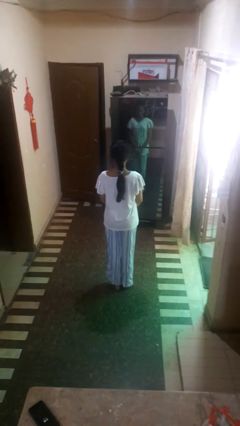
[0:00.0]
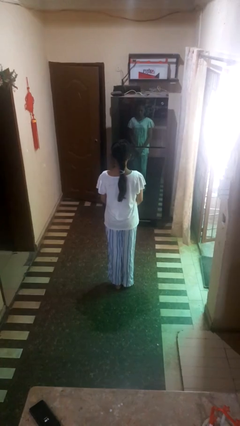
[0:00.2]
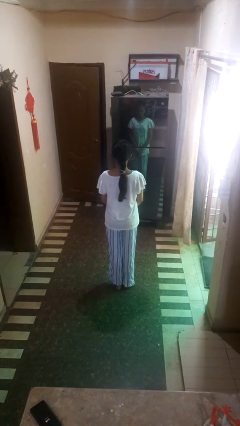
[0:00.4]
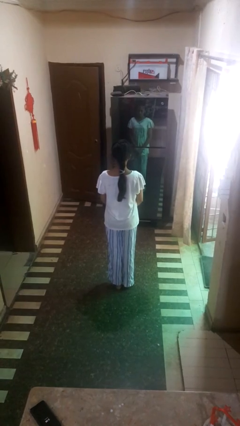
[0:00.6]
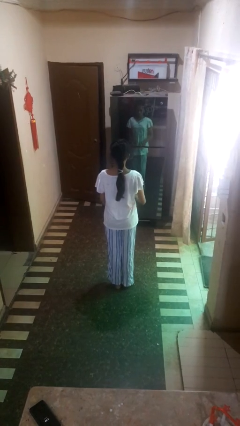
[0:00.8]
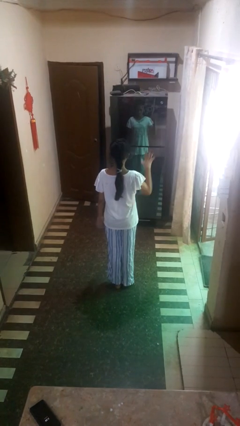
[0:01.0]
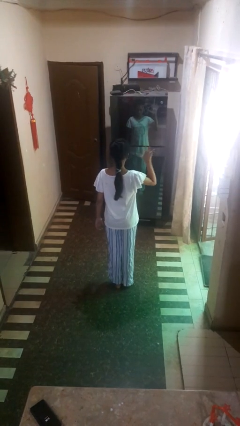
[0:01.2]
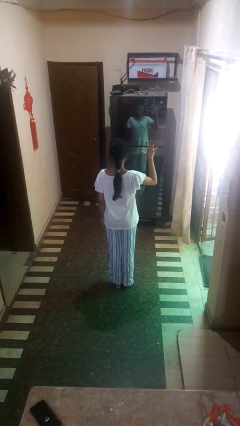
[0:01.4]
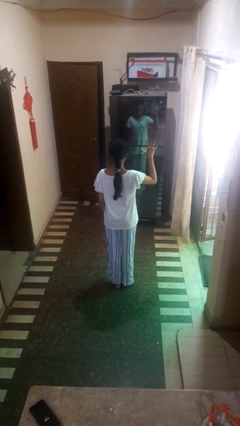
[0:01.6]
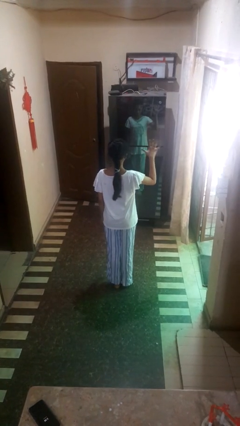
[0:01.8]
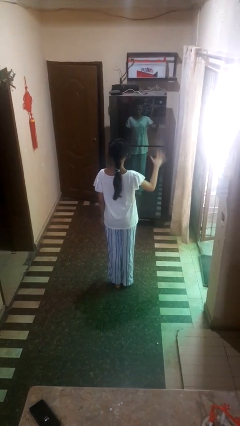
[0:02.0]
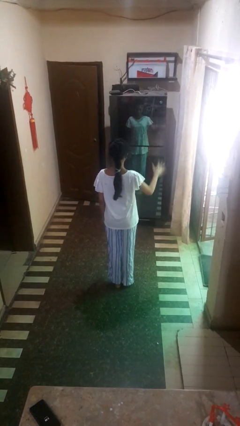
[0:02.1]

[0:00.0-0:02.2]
person gestures number five

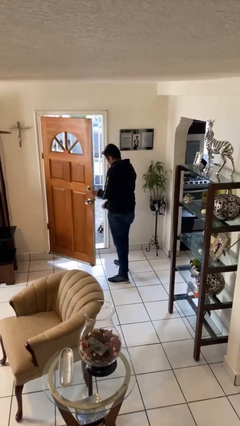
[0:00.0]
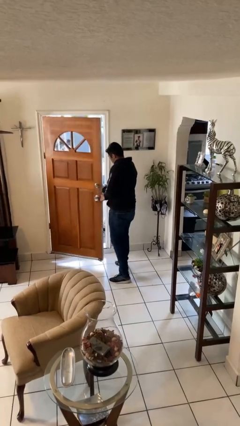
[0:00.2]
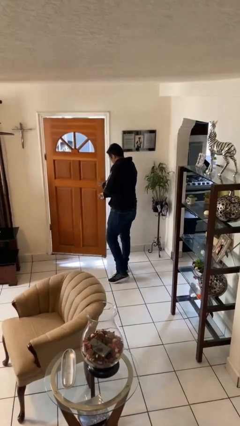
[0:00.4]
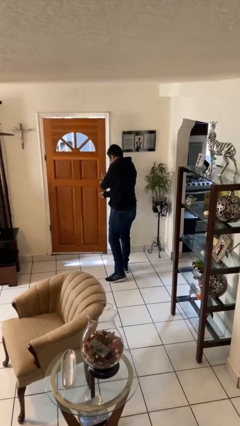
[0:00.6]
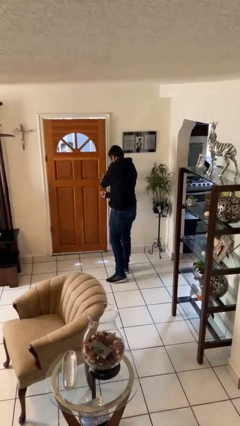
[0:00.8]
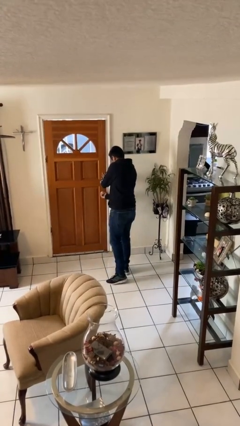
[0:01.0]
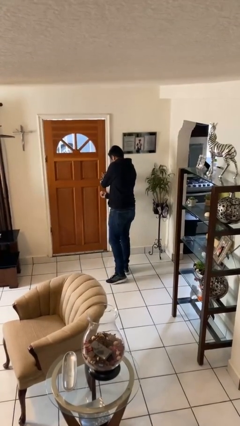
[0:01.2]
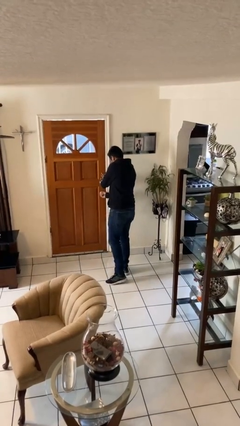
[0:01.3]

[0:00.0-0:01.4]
person closes facility door

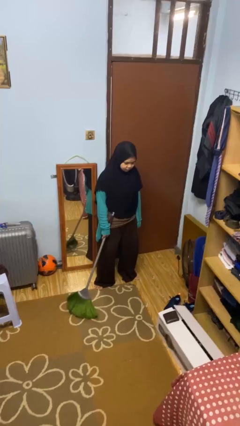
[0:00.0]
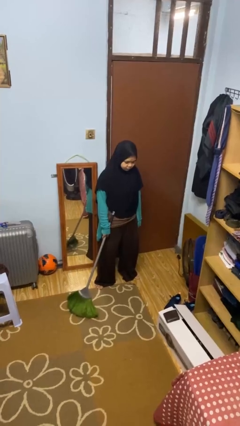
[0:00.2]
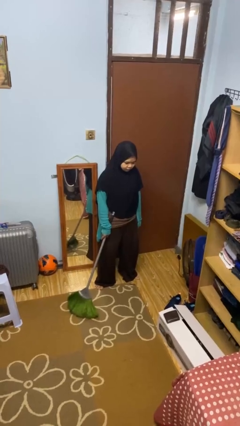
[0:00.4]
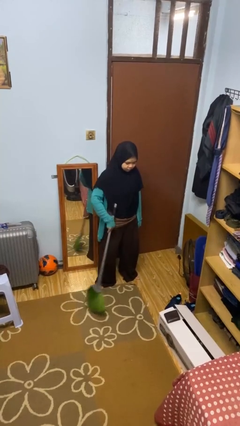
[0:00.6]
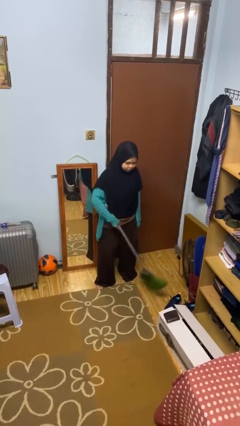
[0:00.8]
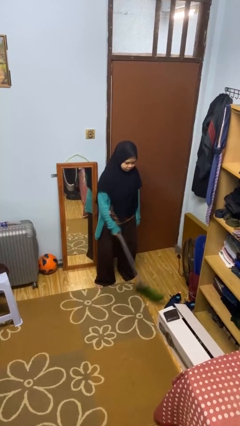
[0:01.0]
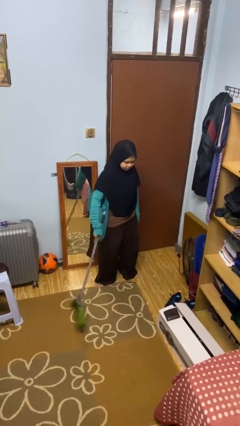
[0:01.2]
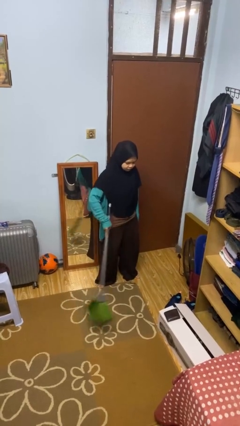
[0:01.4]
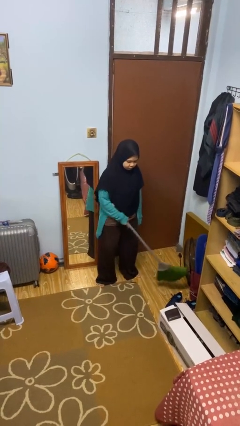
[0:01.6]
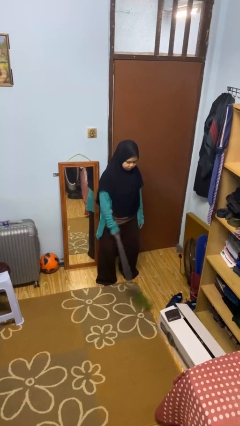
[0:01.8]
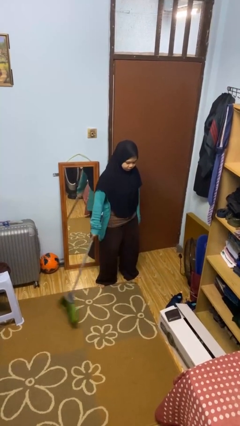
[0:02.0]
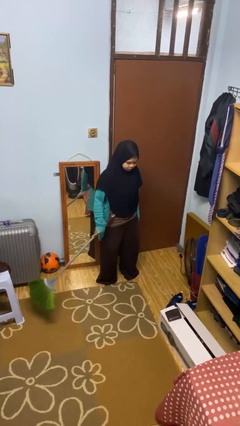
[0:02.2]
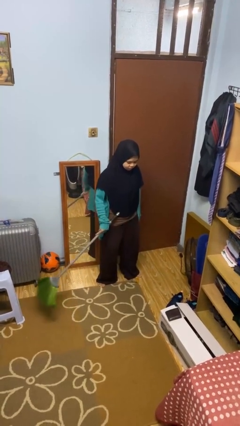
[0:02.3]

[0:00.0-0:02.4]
person sweeps floor

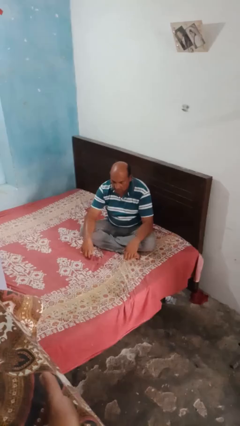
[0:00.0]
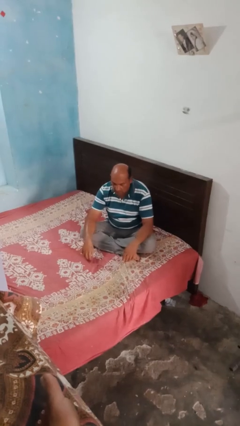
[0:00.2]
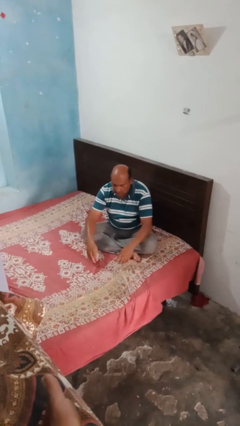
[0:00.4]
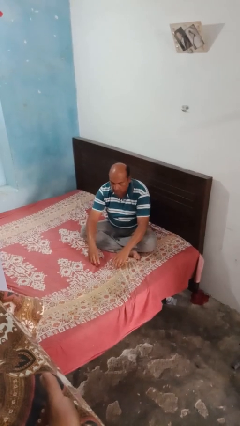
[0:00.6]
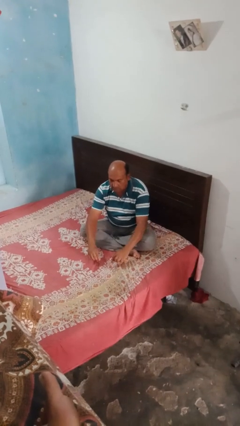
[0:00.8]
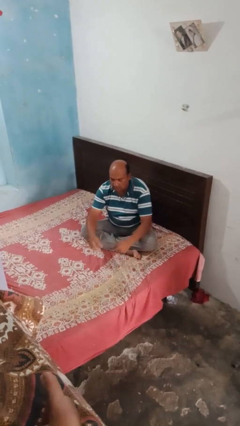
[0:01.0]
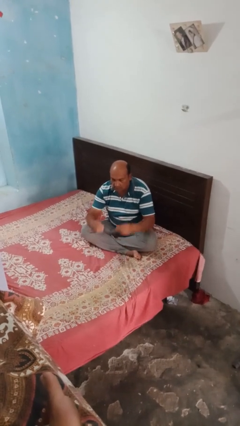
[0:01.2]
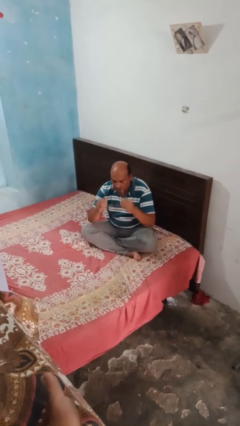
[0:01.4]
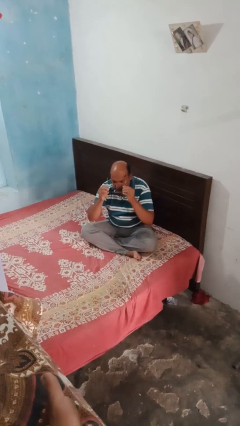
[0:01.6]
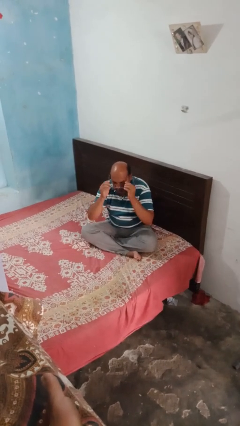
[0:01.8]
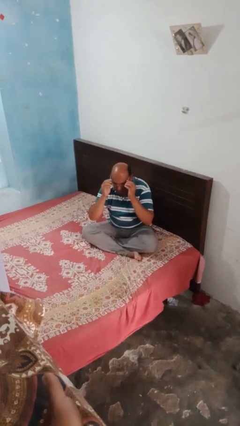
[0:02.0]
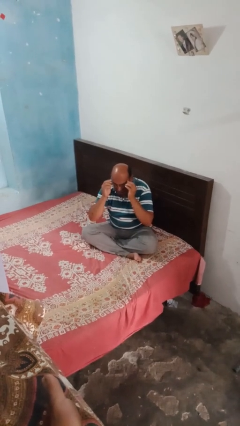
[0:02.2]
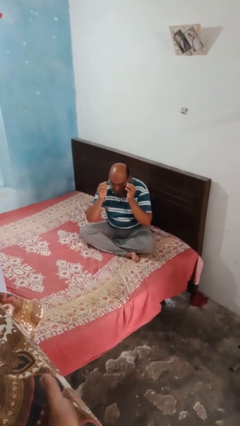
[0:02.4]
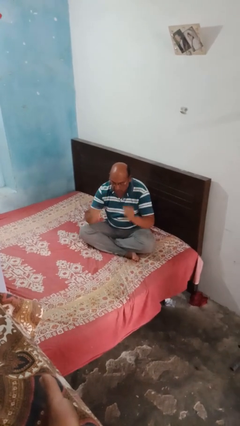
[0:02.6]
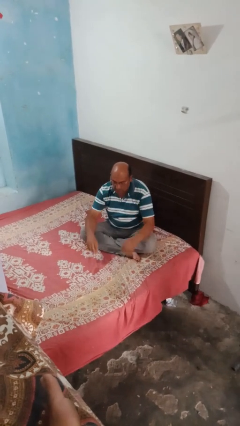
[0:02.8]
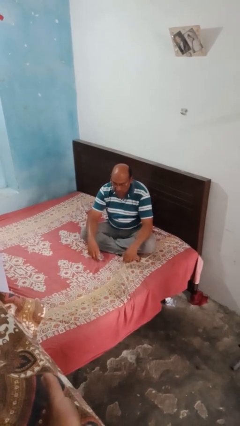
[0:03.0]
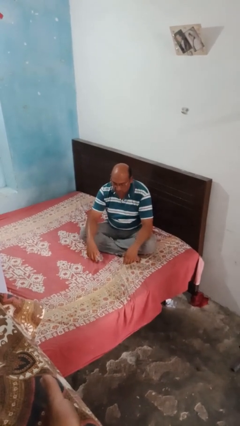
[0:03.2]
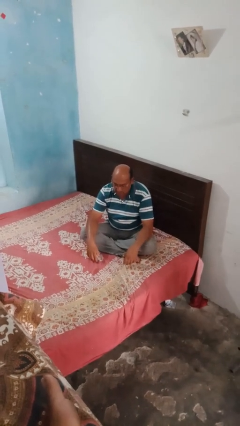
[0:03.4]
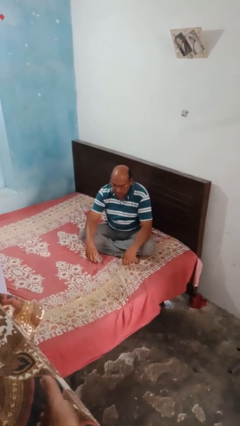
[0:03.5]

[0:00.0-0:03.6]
person puts on glasses

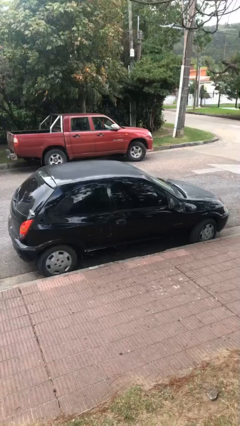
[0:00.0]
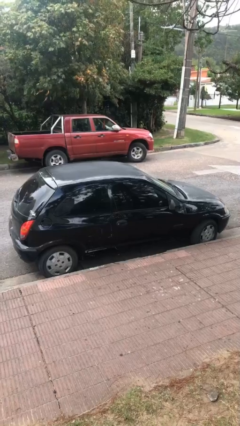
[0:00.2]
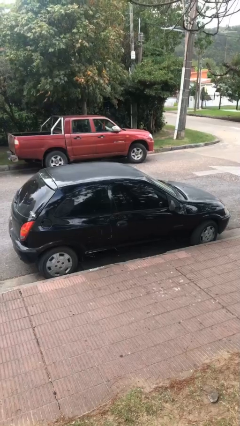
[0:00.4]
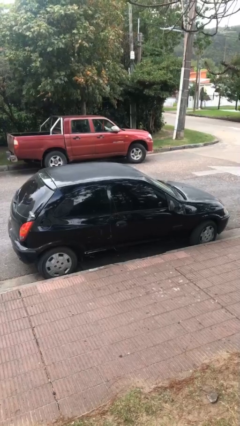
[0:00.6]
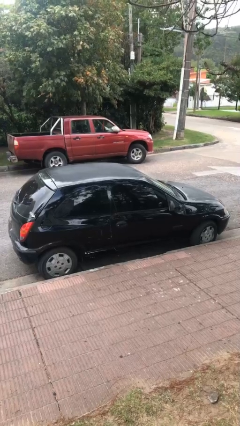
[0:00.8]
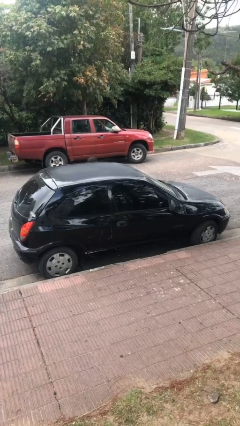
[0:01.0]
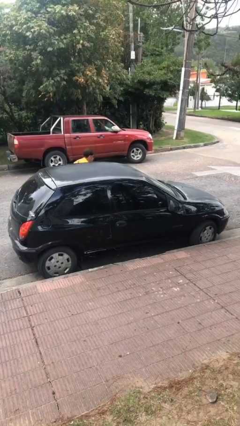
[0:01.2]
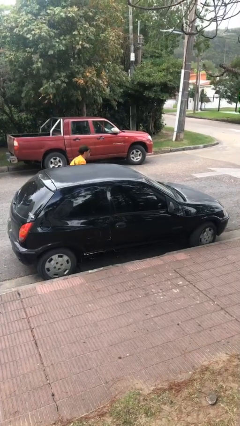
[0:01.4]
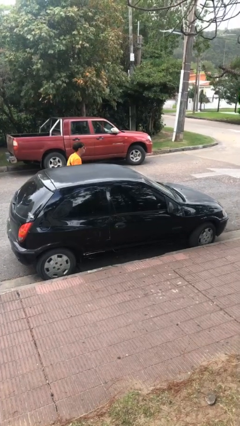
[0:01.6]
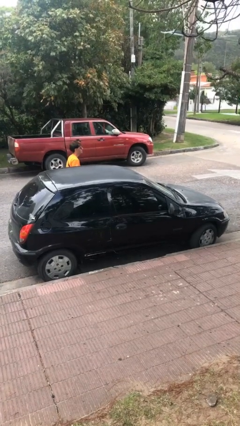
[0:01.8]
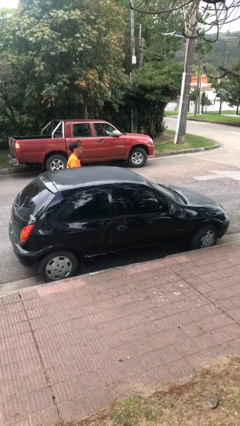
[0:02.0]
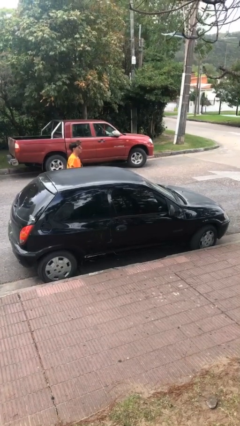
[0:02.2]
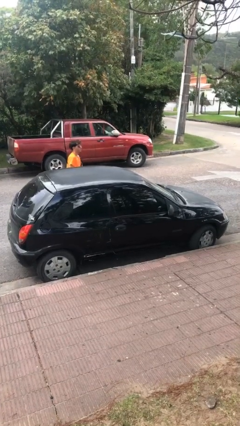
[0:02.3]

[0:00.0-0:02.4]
car drops off person

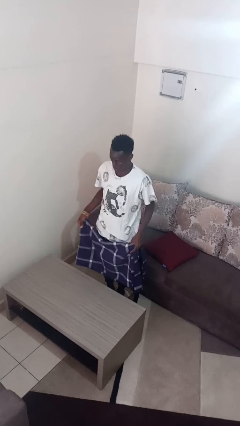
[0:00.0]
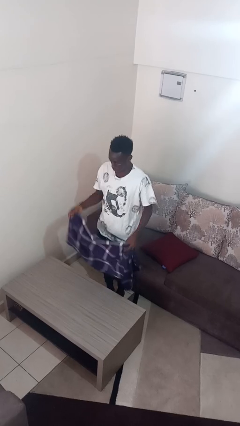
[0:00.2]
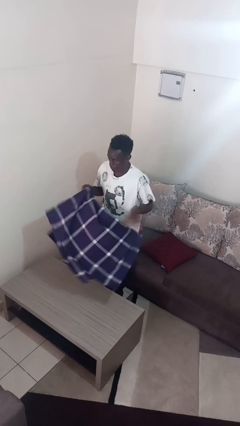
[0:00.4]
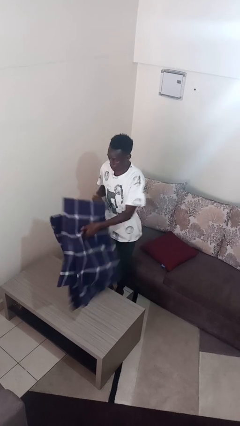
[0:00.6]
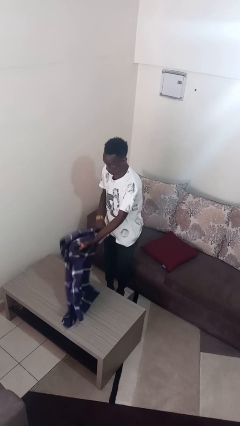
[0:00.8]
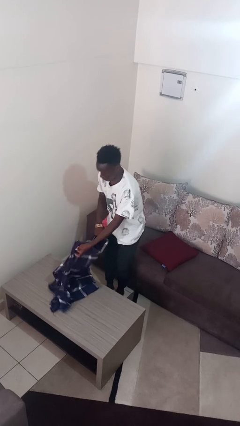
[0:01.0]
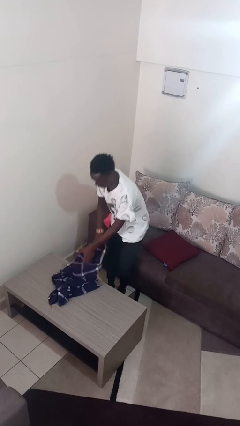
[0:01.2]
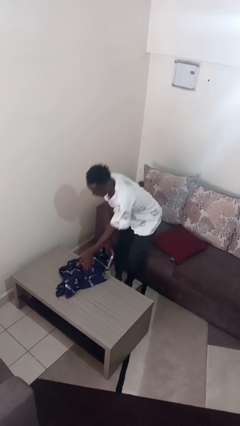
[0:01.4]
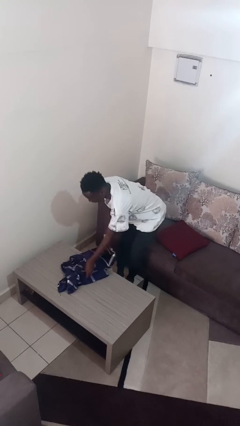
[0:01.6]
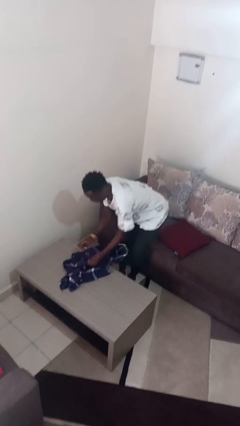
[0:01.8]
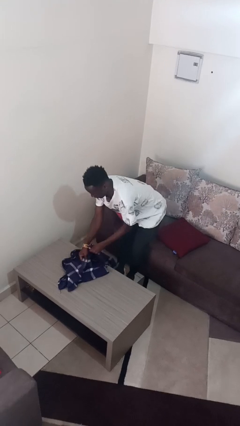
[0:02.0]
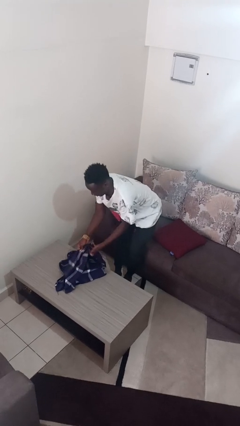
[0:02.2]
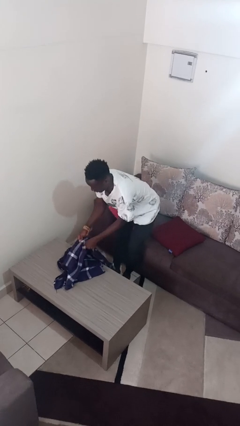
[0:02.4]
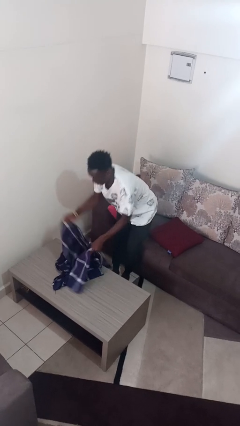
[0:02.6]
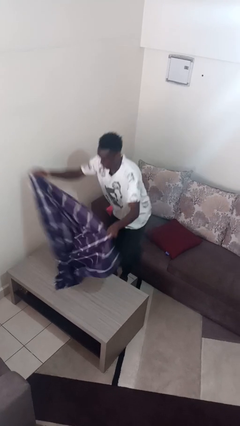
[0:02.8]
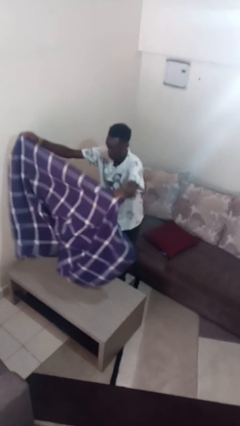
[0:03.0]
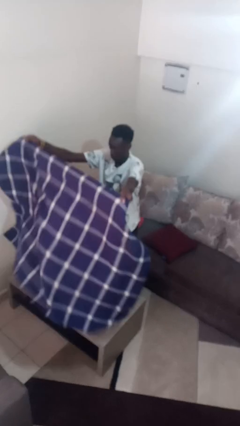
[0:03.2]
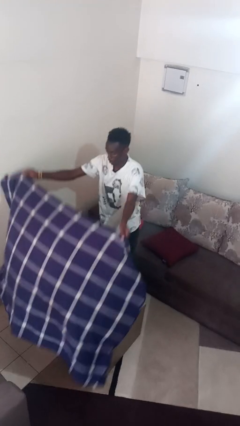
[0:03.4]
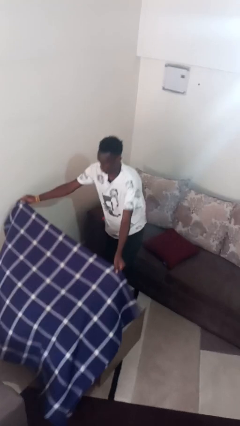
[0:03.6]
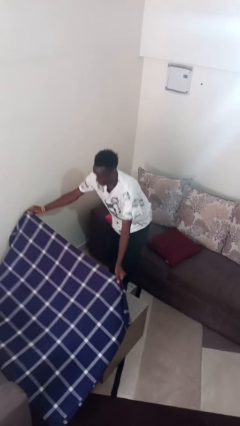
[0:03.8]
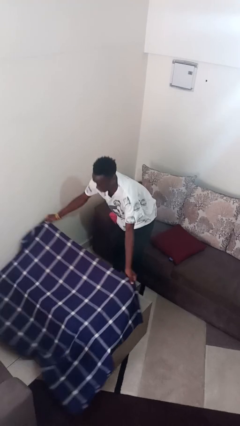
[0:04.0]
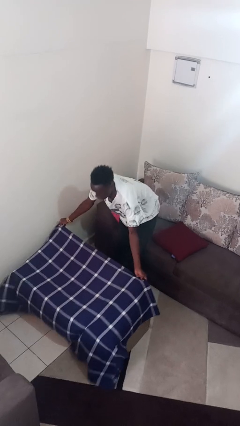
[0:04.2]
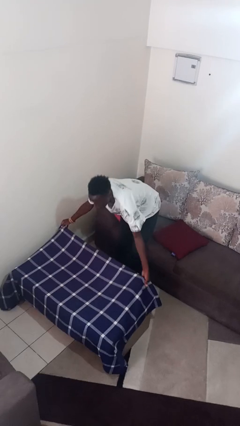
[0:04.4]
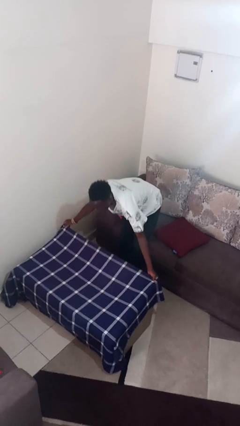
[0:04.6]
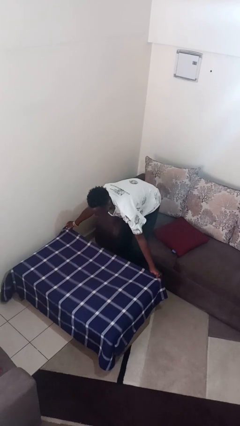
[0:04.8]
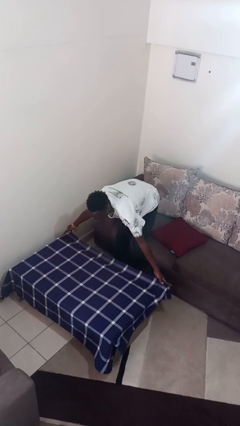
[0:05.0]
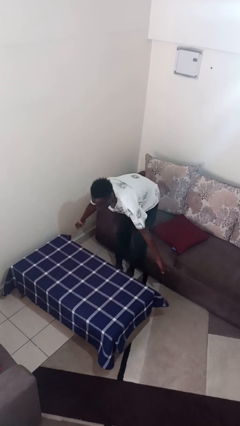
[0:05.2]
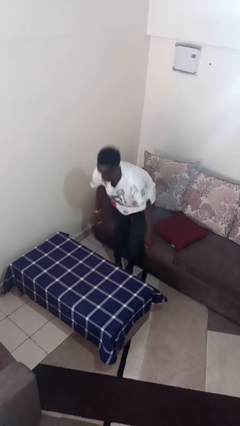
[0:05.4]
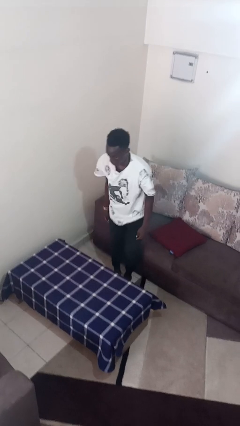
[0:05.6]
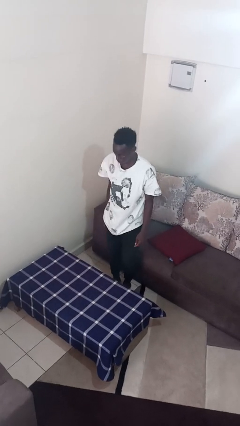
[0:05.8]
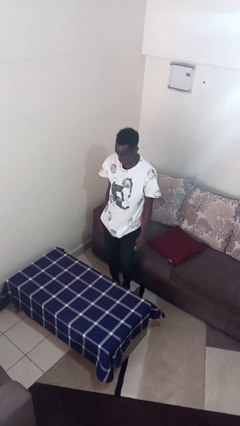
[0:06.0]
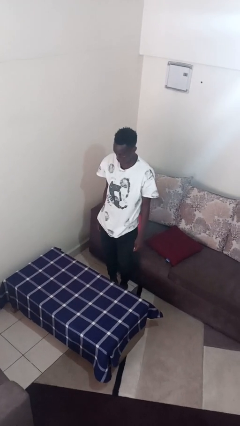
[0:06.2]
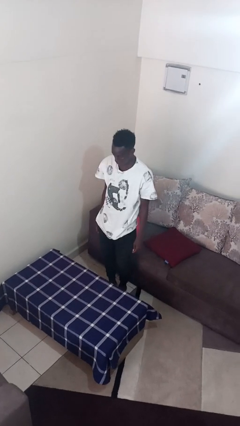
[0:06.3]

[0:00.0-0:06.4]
person spreads tablecloth
